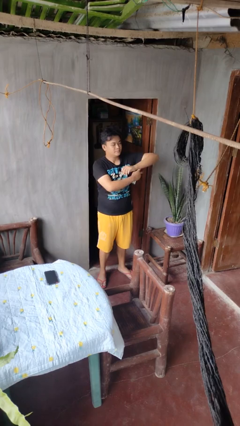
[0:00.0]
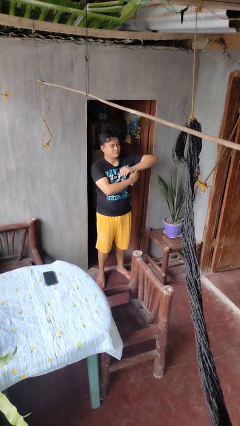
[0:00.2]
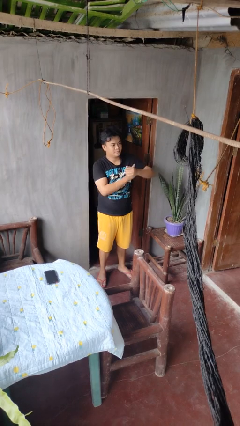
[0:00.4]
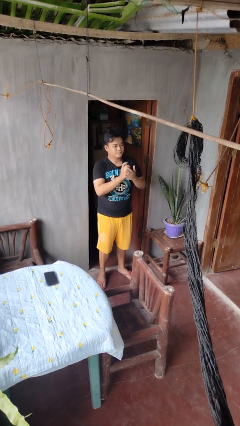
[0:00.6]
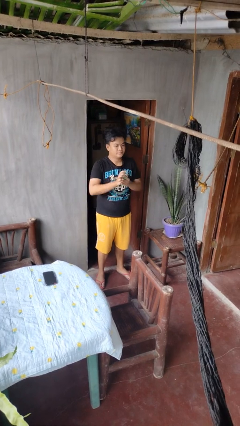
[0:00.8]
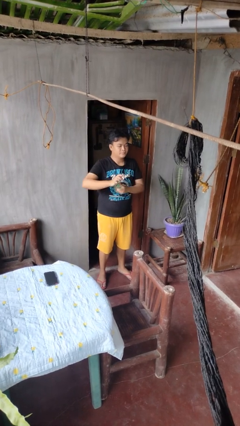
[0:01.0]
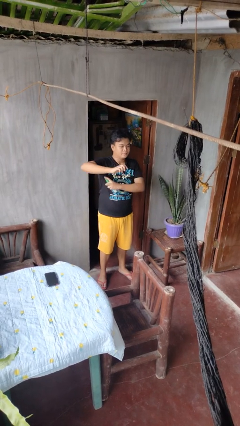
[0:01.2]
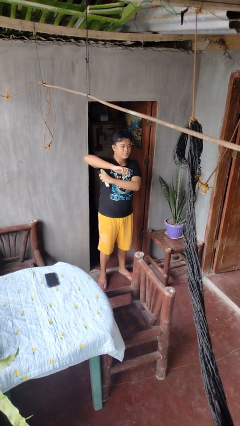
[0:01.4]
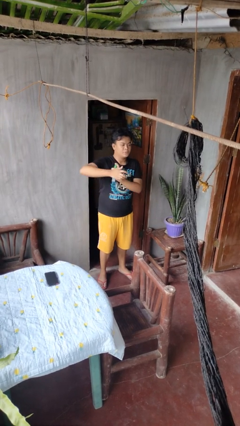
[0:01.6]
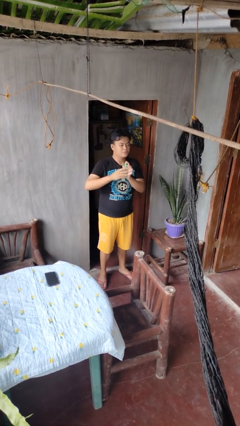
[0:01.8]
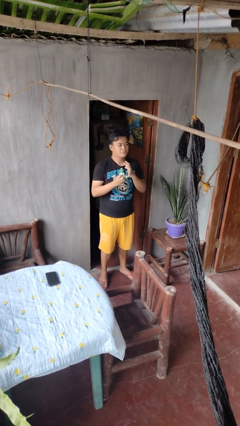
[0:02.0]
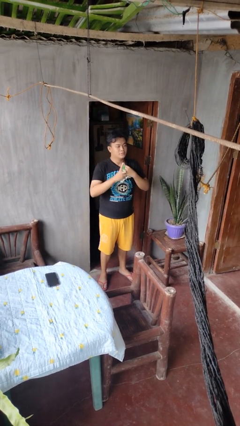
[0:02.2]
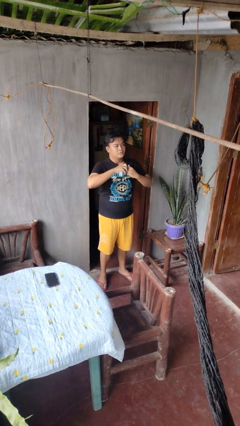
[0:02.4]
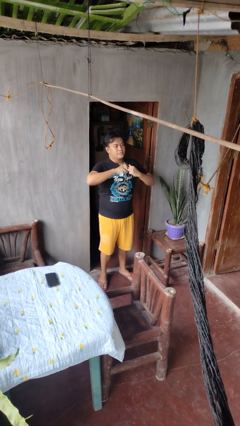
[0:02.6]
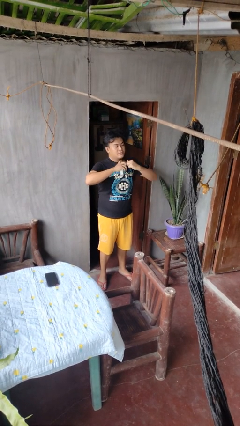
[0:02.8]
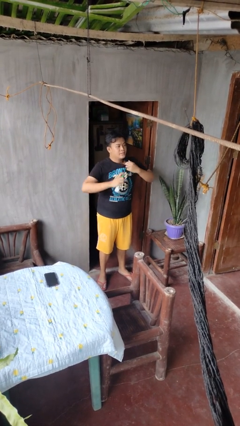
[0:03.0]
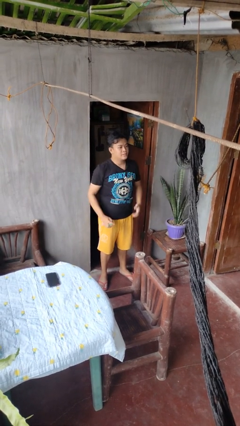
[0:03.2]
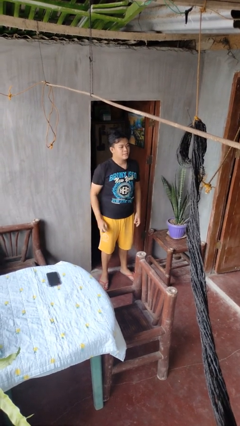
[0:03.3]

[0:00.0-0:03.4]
person applies deodorant

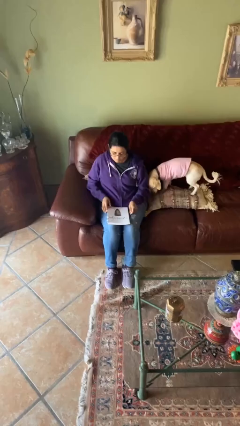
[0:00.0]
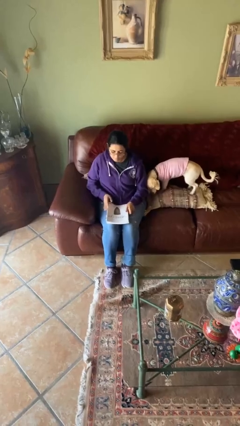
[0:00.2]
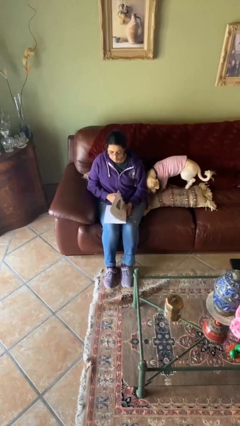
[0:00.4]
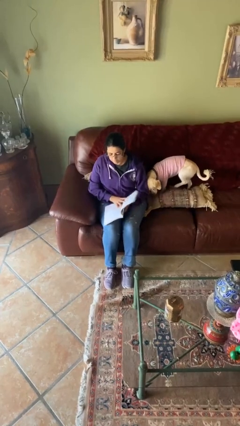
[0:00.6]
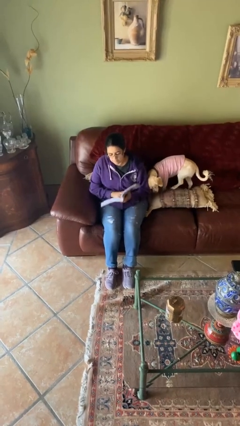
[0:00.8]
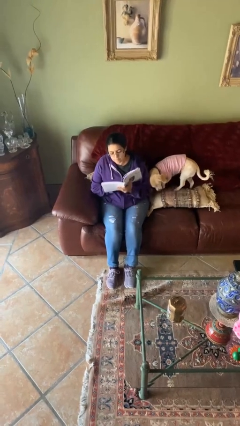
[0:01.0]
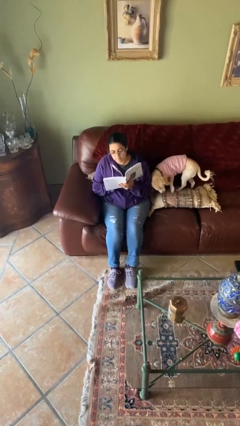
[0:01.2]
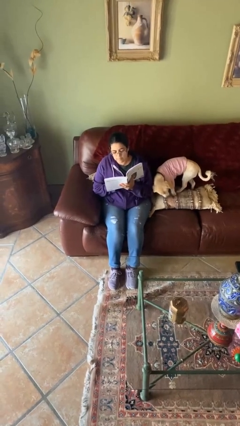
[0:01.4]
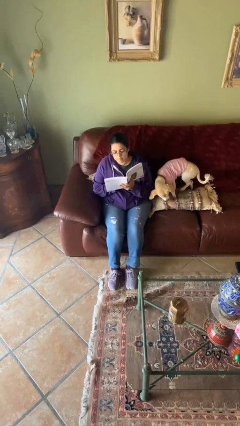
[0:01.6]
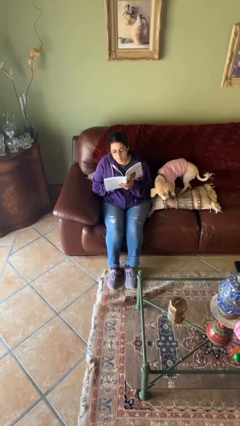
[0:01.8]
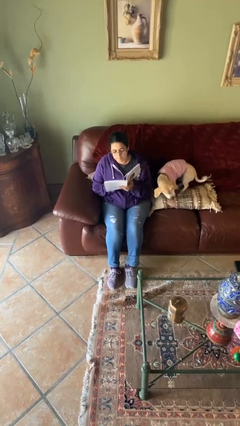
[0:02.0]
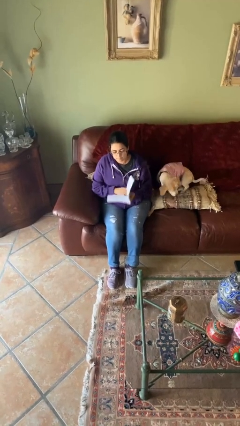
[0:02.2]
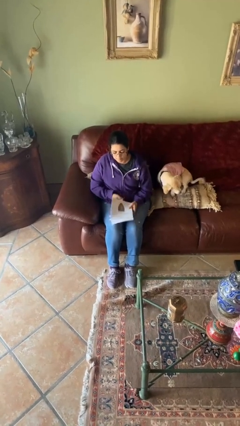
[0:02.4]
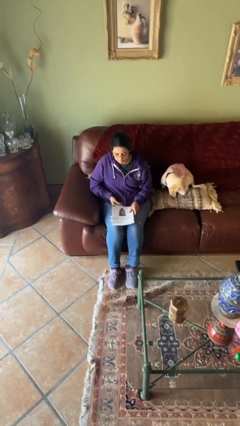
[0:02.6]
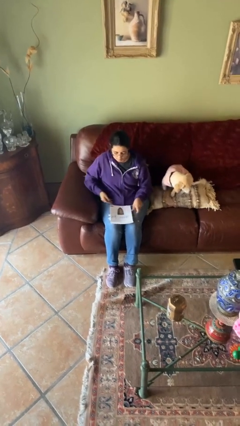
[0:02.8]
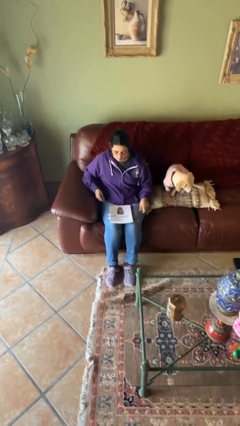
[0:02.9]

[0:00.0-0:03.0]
person reads document

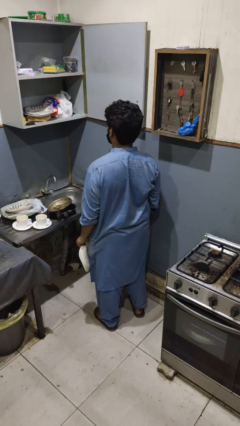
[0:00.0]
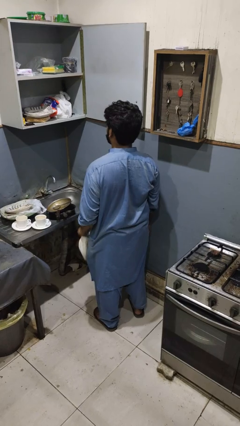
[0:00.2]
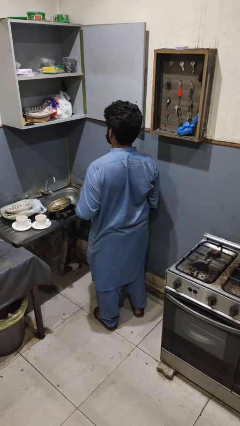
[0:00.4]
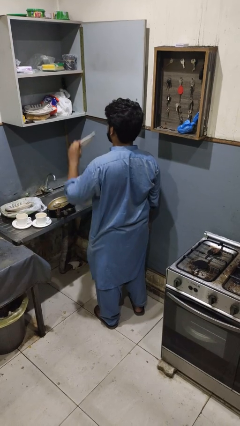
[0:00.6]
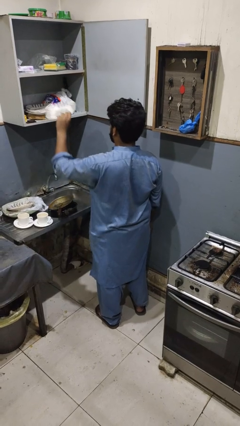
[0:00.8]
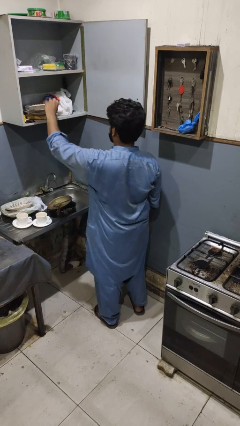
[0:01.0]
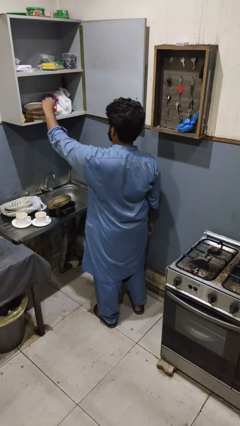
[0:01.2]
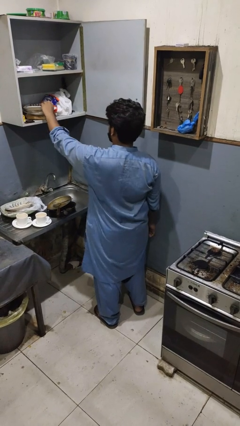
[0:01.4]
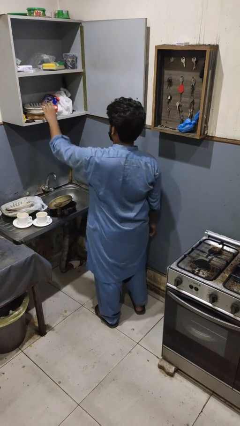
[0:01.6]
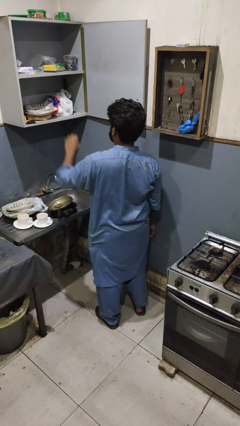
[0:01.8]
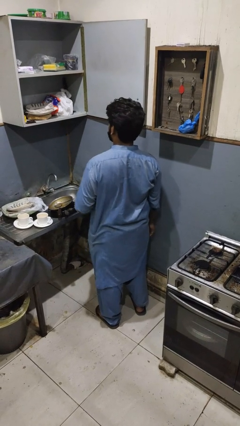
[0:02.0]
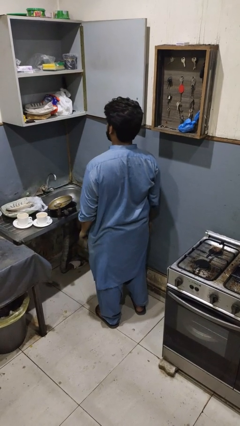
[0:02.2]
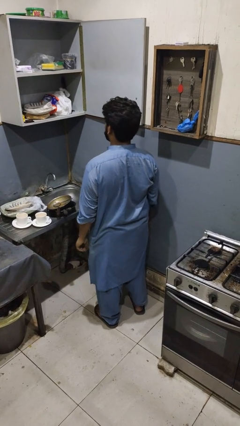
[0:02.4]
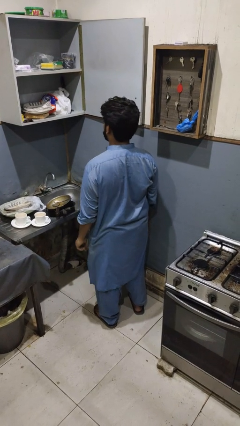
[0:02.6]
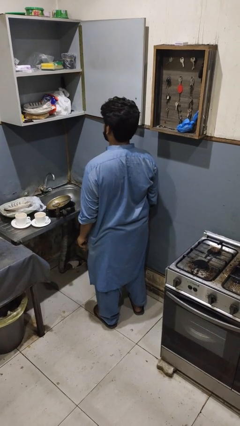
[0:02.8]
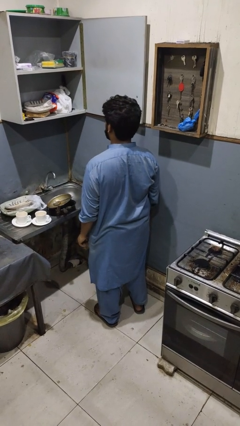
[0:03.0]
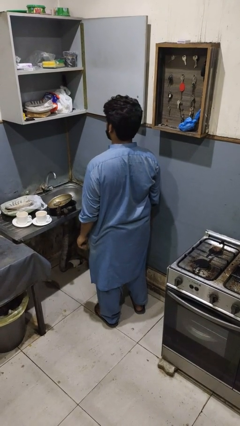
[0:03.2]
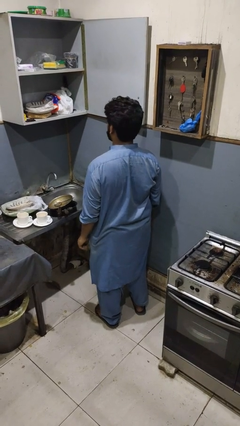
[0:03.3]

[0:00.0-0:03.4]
person puts object in cabinet

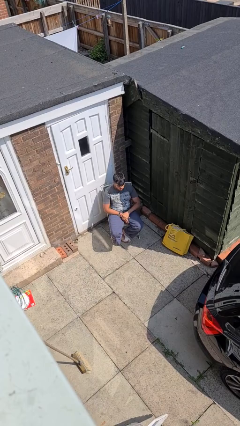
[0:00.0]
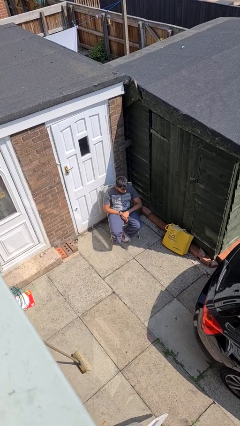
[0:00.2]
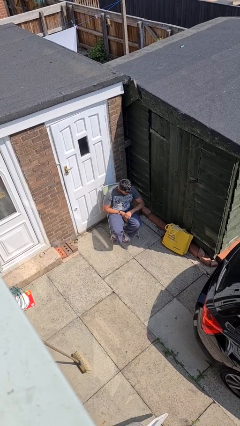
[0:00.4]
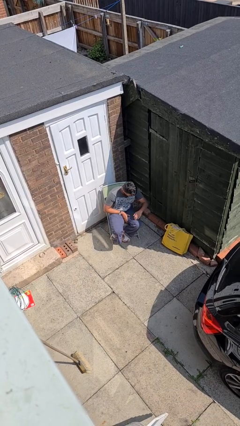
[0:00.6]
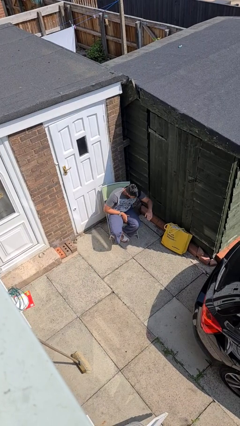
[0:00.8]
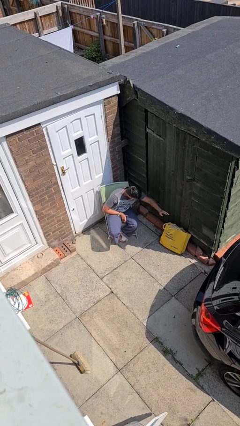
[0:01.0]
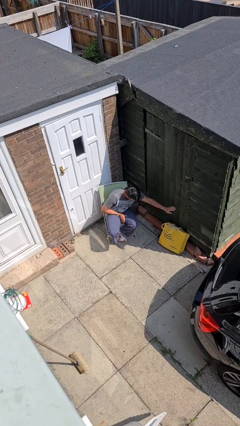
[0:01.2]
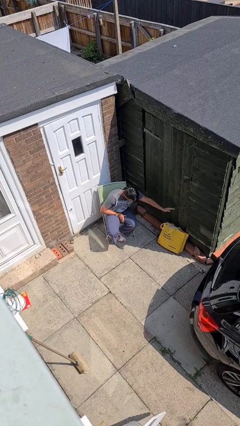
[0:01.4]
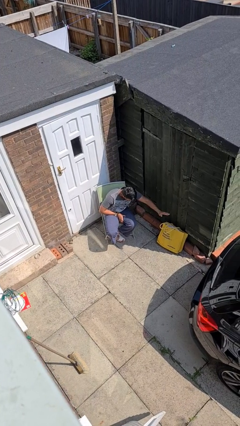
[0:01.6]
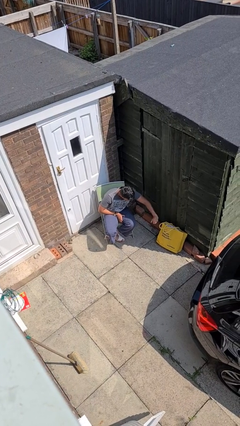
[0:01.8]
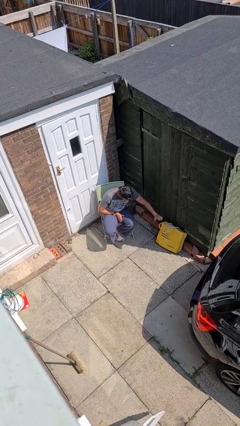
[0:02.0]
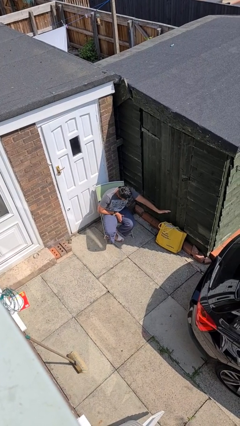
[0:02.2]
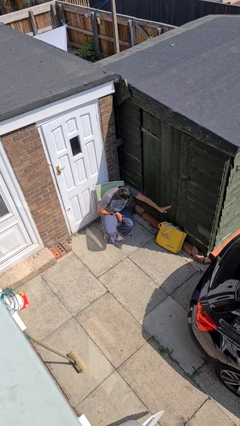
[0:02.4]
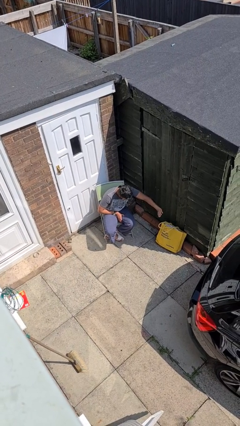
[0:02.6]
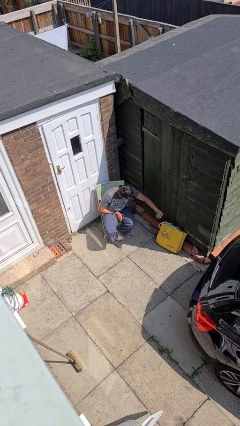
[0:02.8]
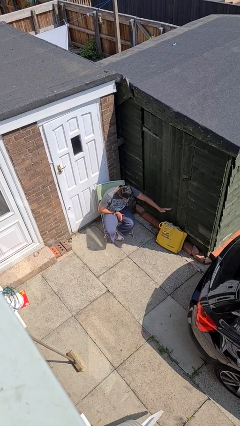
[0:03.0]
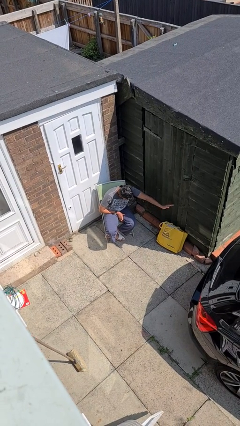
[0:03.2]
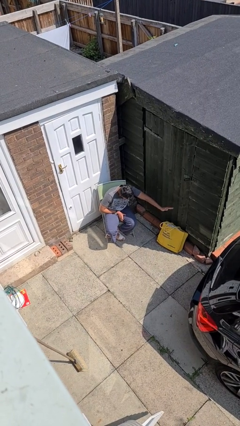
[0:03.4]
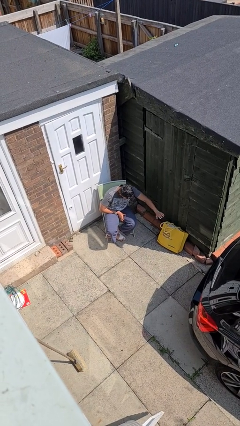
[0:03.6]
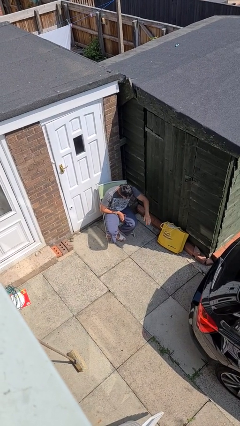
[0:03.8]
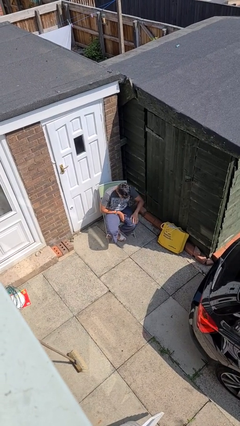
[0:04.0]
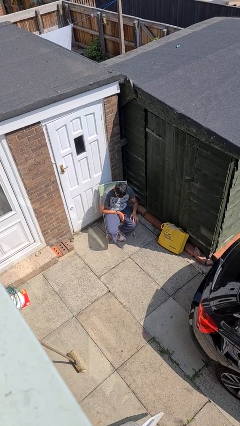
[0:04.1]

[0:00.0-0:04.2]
person waves hand over object

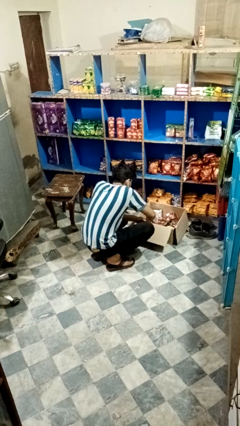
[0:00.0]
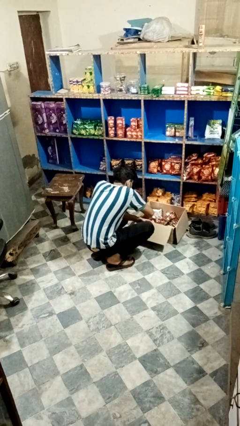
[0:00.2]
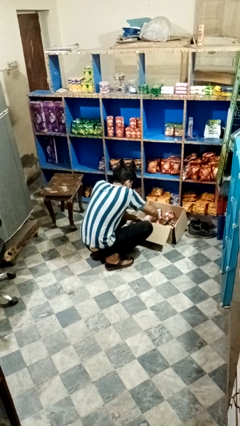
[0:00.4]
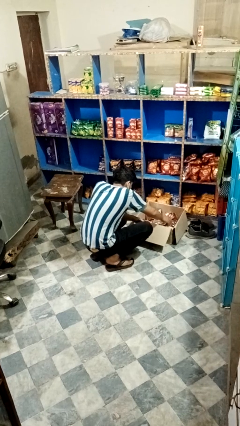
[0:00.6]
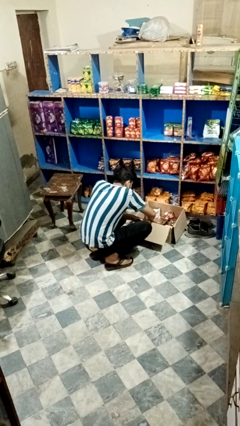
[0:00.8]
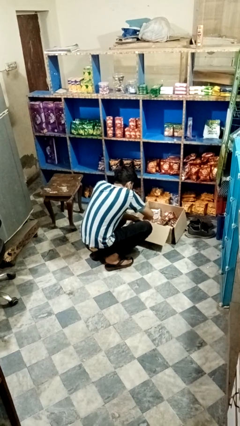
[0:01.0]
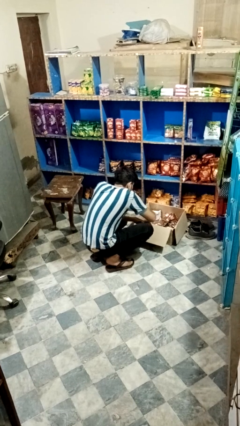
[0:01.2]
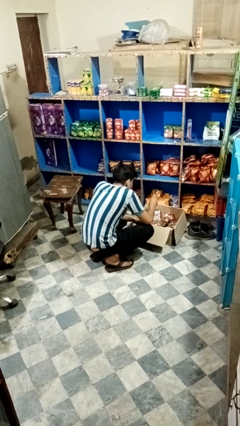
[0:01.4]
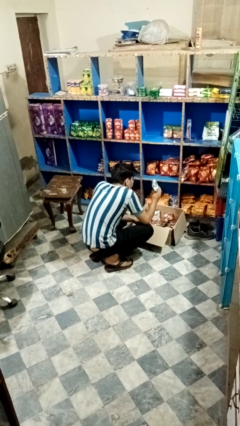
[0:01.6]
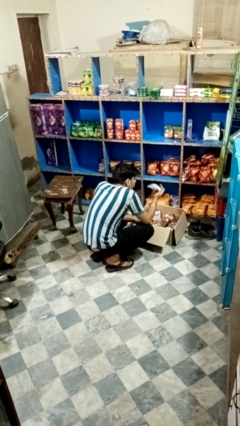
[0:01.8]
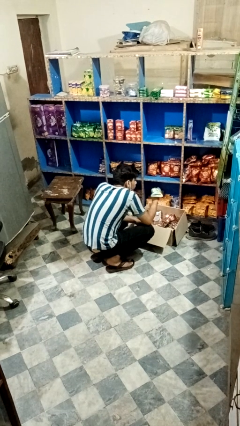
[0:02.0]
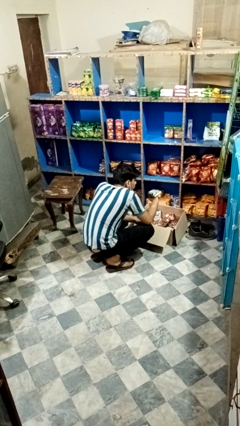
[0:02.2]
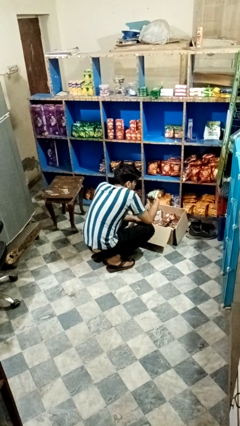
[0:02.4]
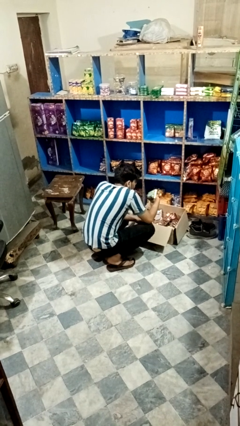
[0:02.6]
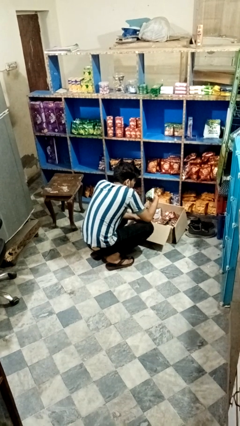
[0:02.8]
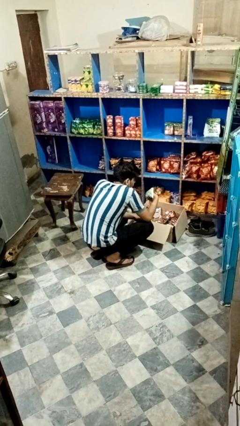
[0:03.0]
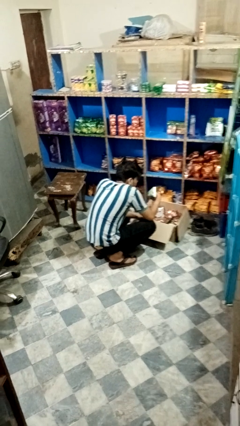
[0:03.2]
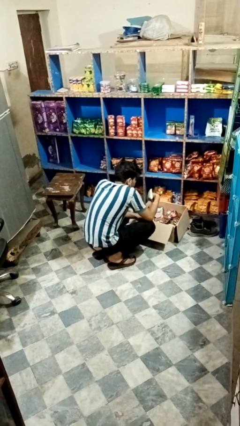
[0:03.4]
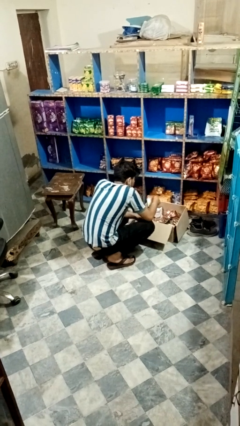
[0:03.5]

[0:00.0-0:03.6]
person searches in box
